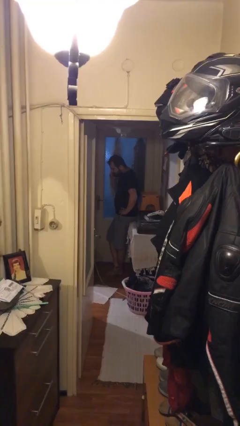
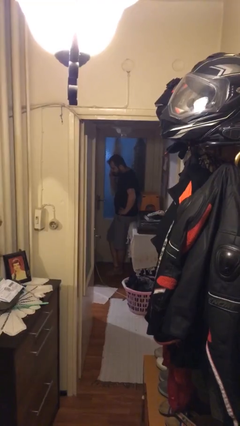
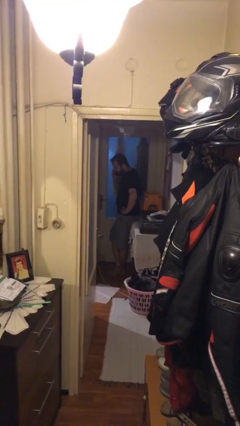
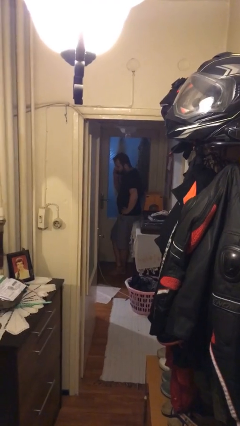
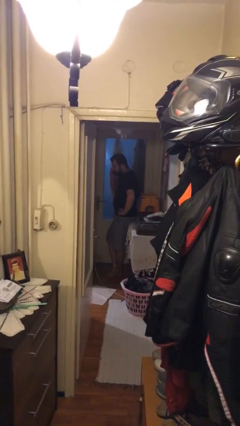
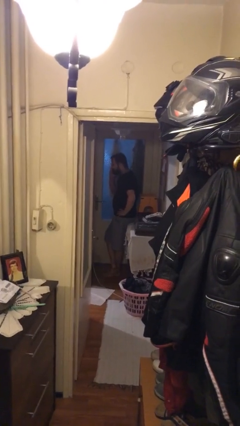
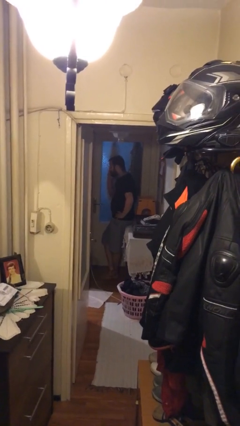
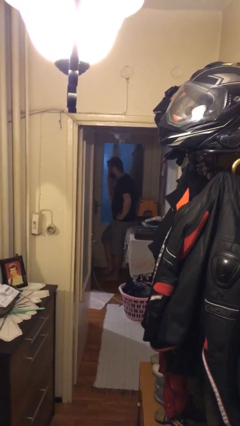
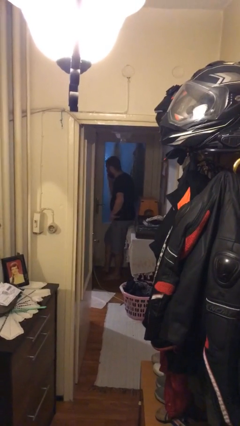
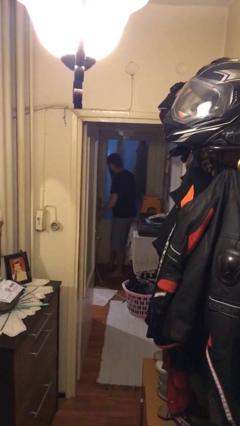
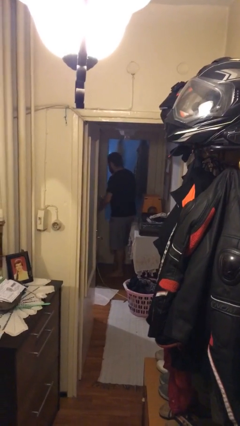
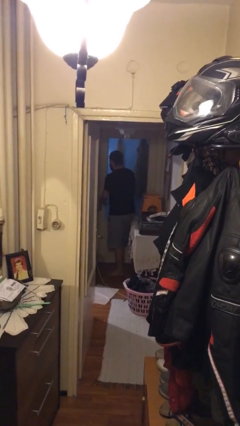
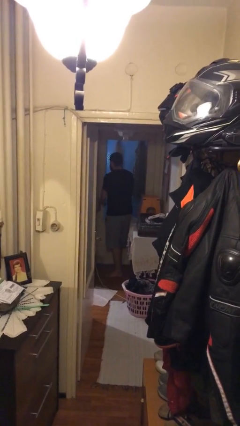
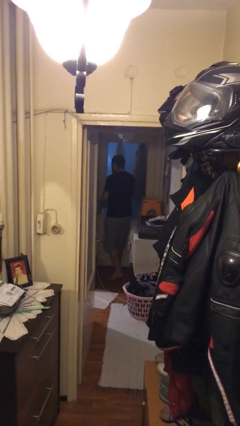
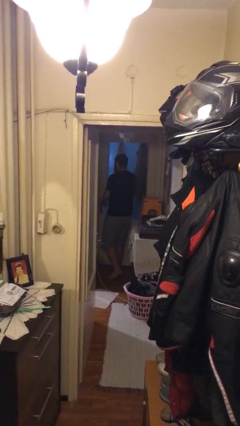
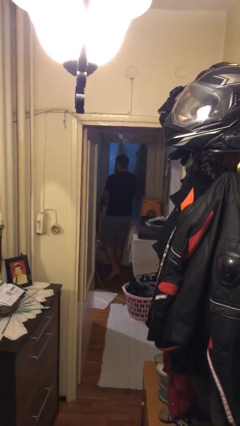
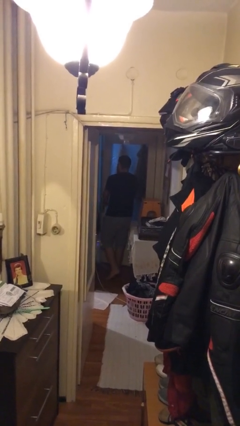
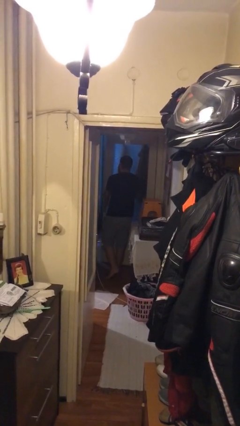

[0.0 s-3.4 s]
person opens facility door

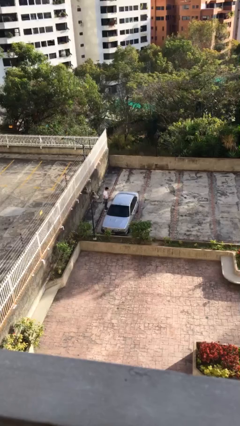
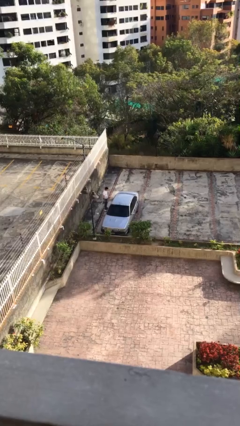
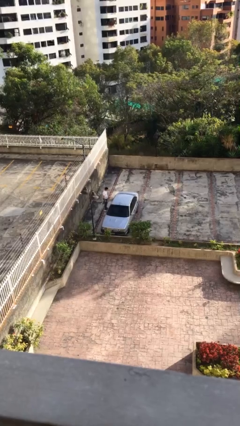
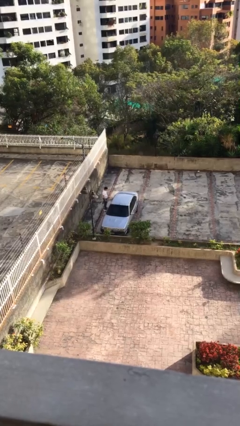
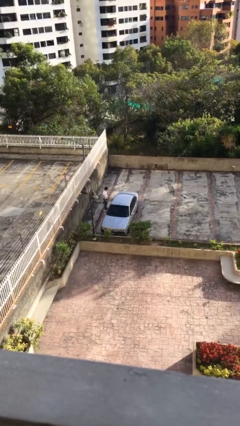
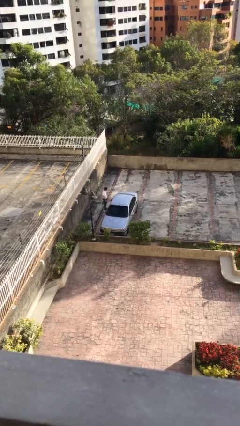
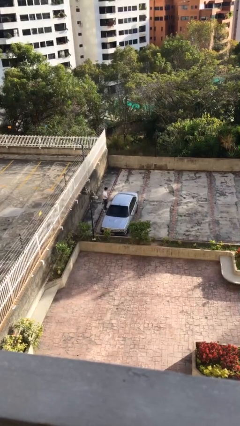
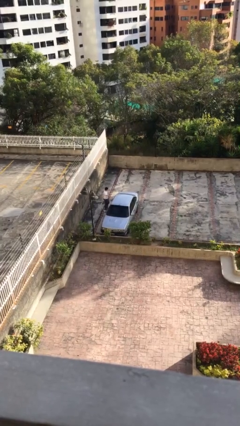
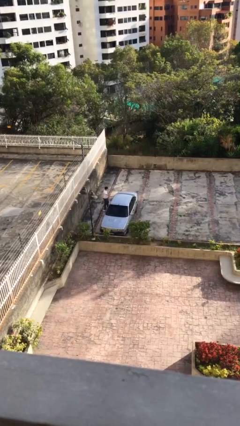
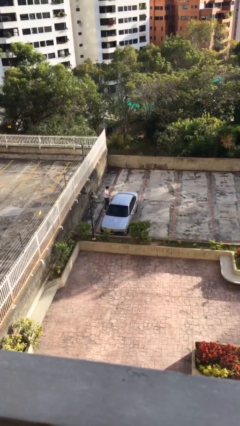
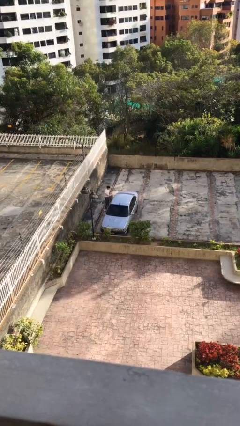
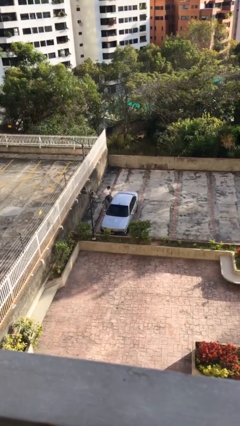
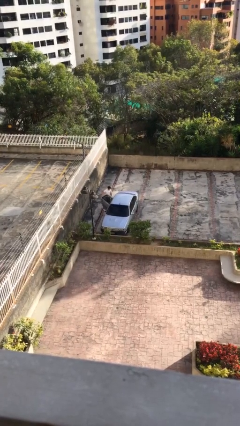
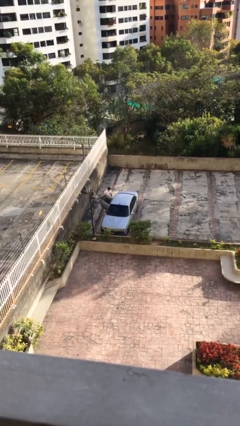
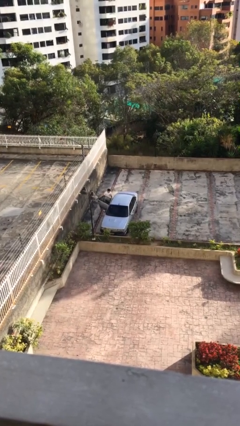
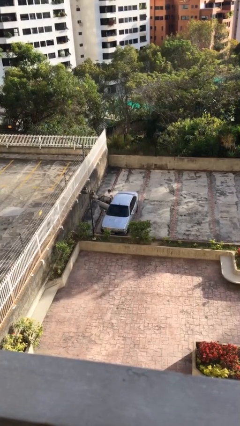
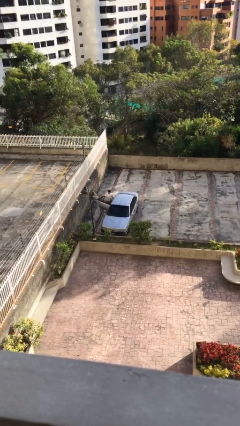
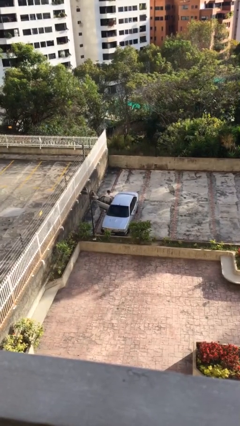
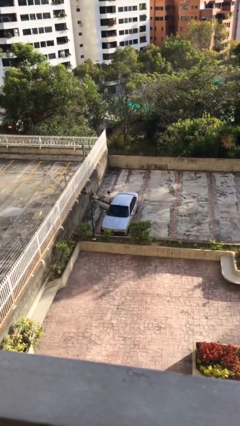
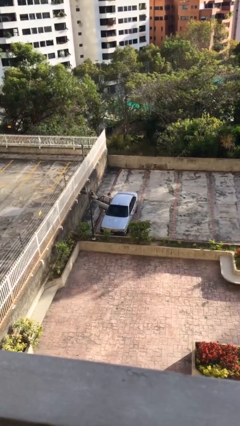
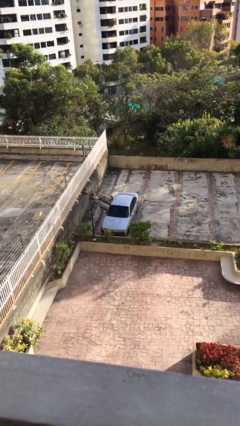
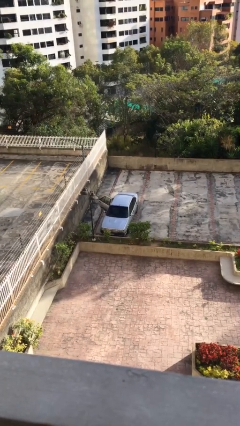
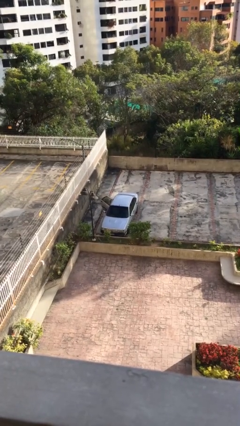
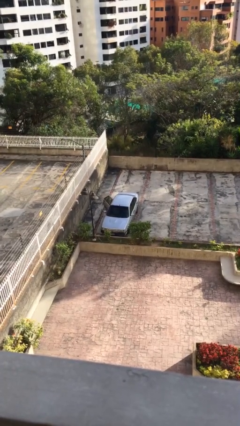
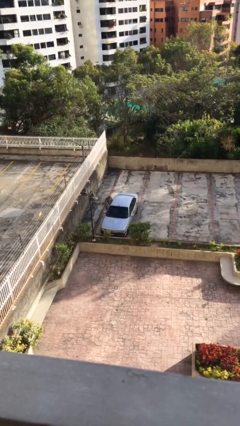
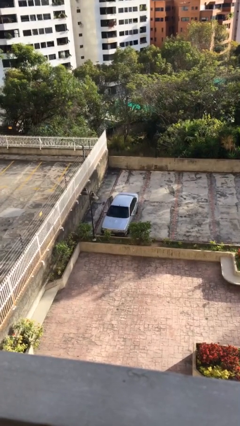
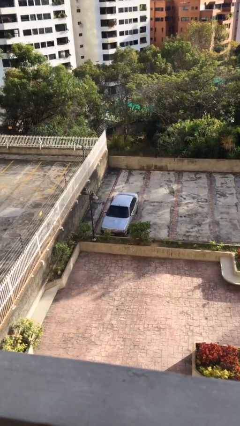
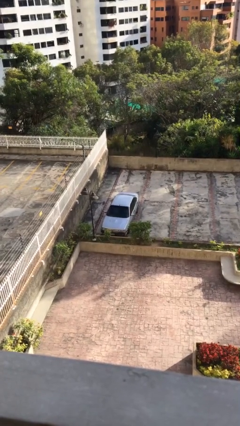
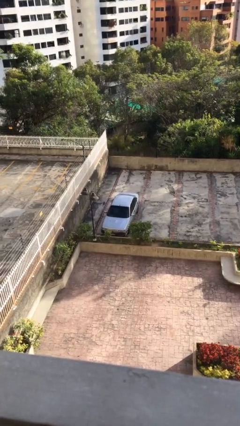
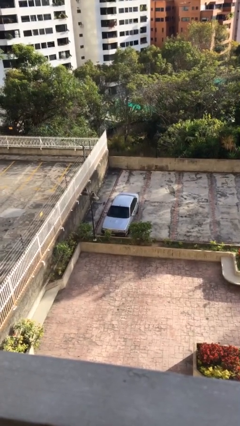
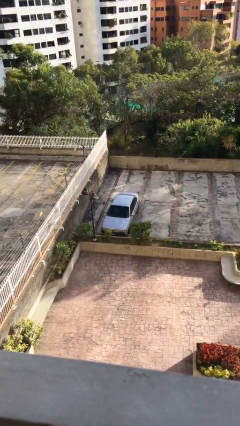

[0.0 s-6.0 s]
car picks up person

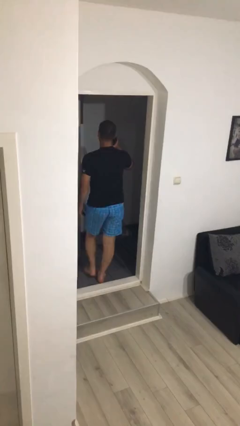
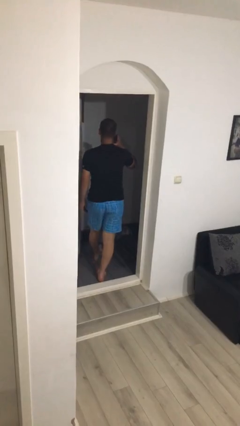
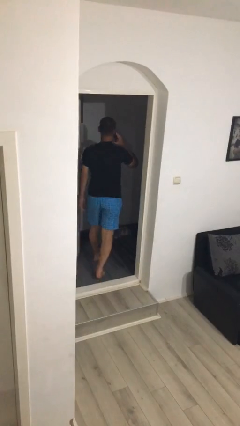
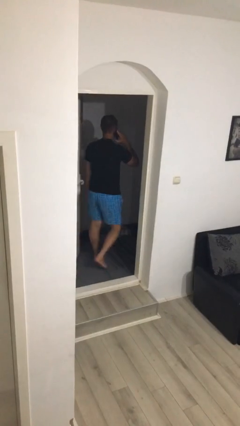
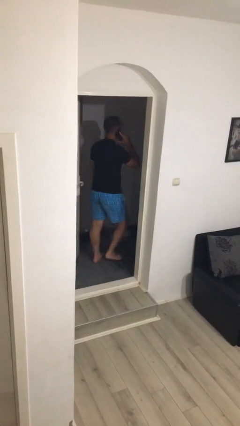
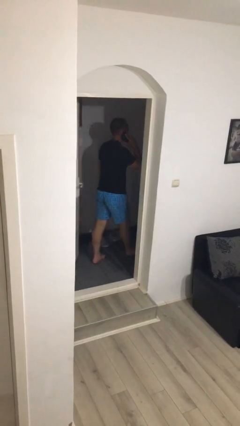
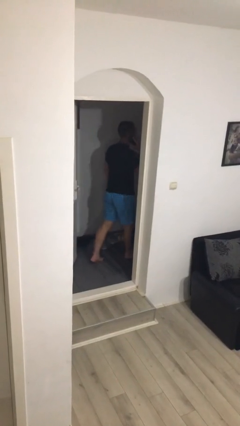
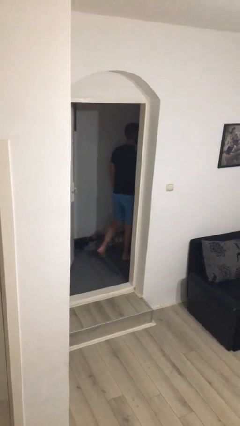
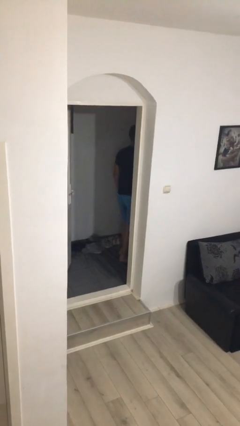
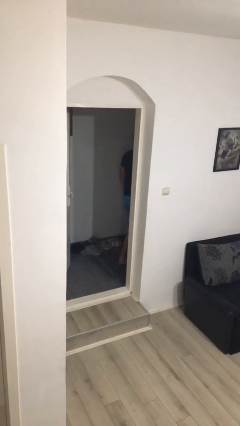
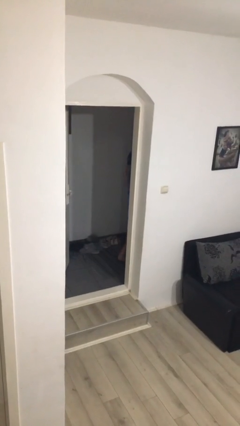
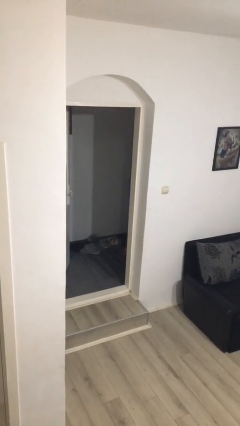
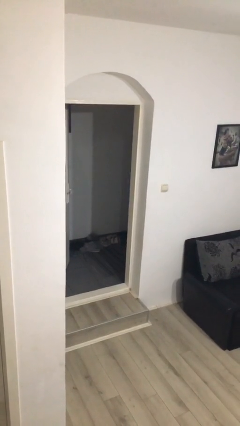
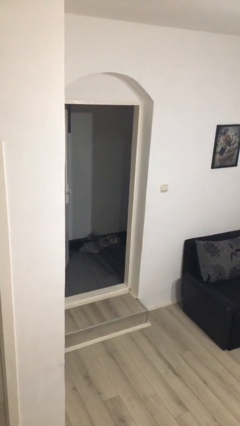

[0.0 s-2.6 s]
person exits scene through structure

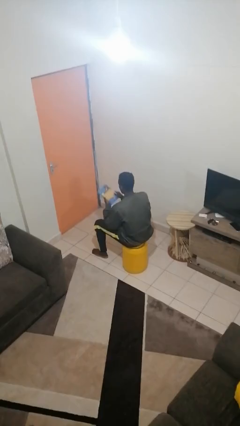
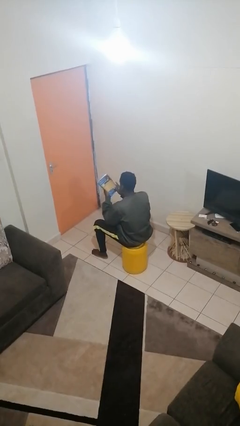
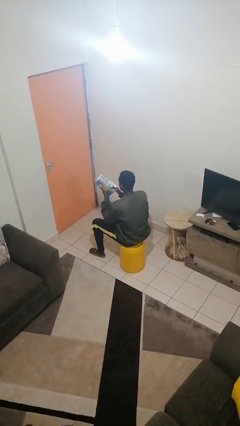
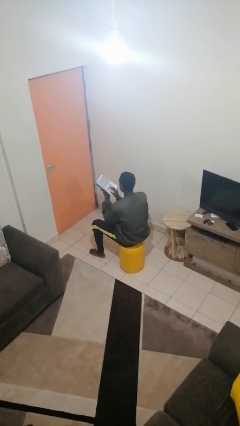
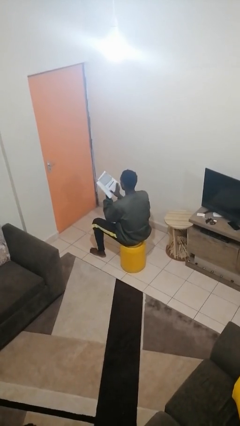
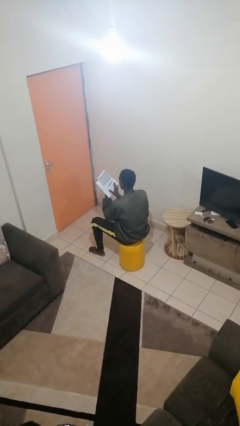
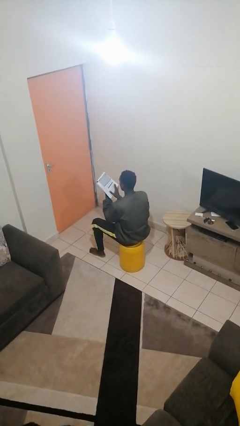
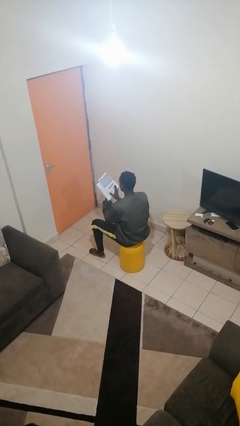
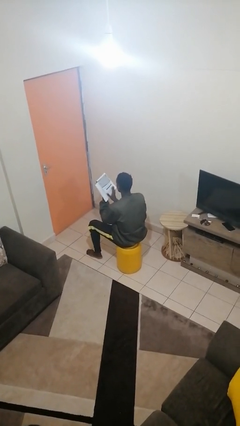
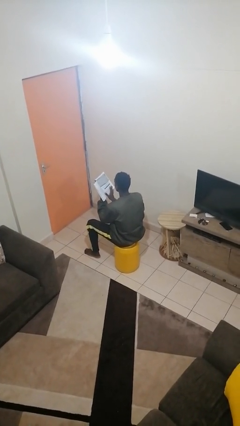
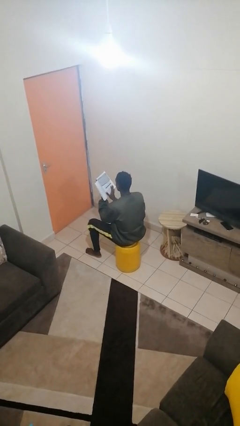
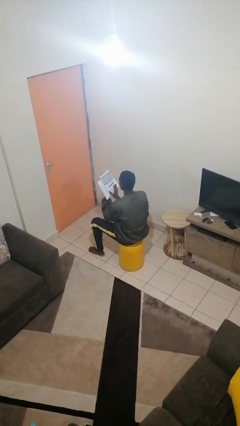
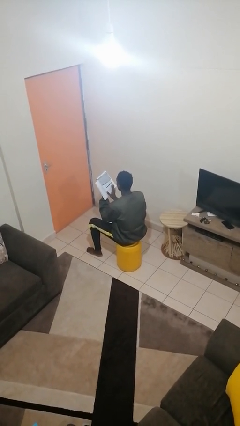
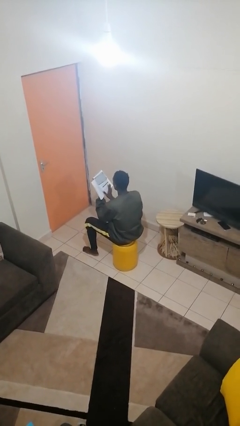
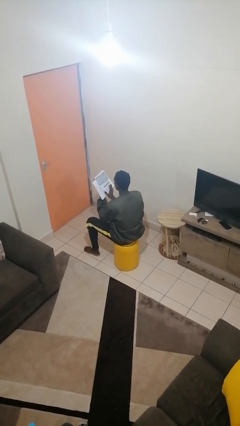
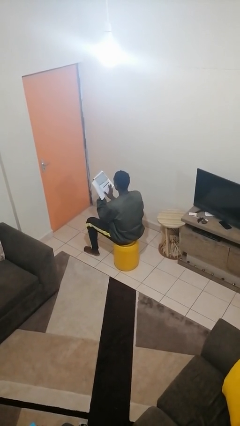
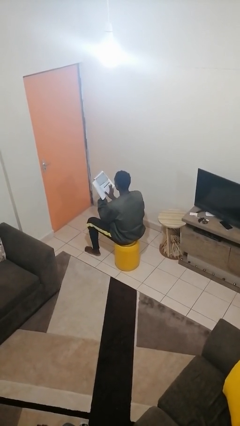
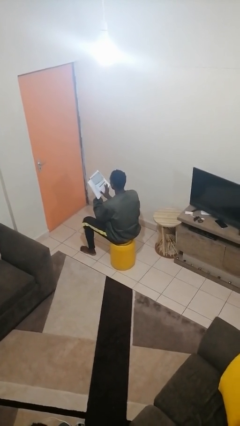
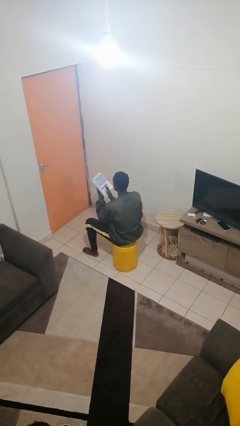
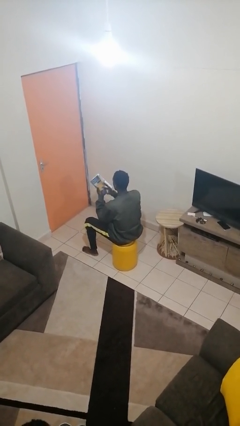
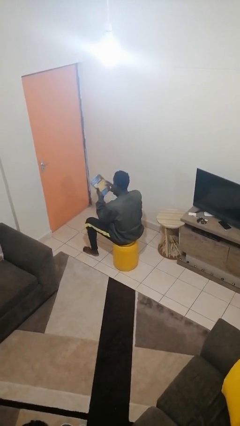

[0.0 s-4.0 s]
person reads book

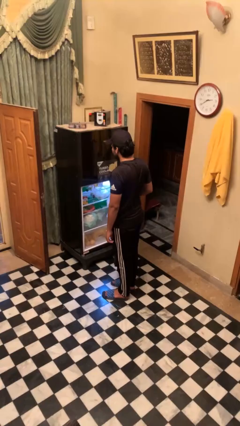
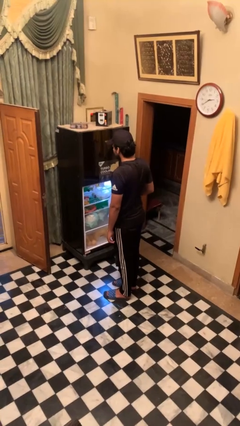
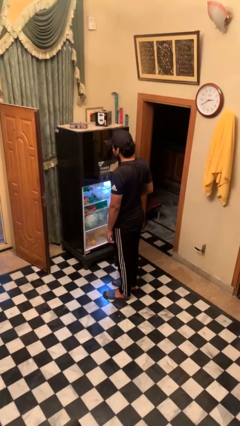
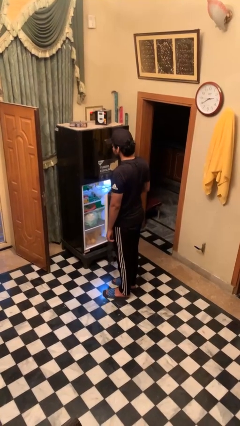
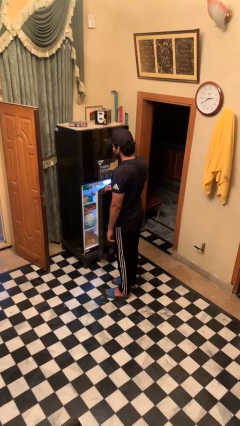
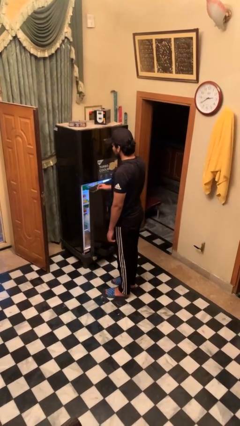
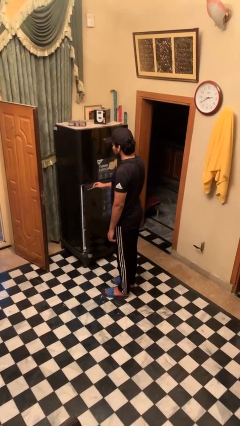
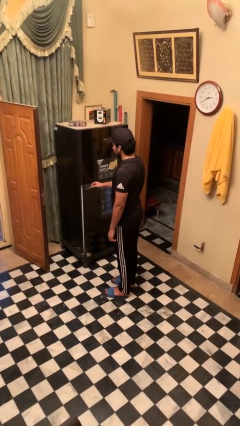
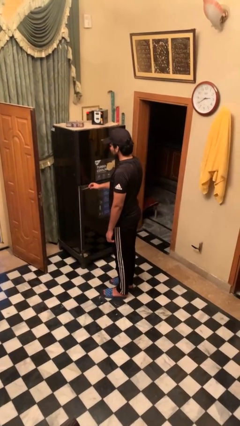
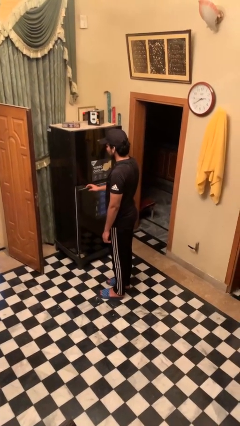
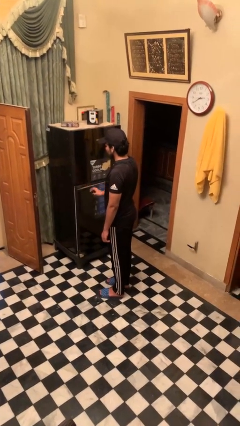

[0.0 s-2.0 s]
person closes refrigerator
